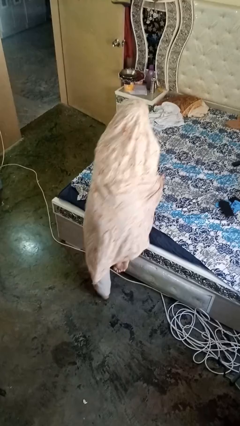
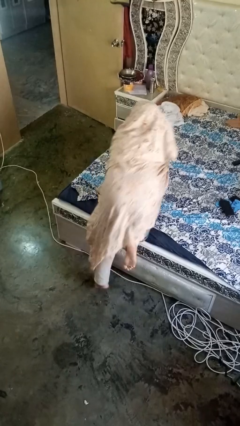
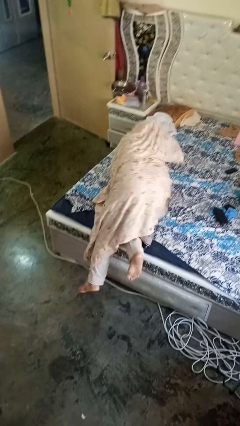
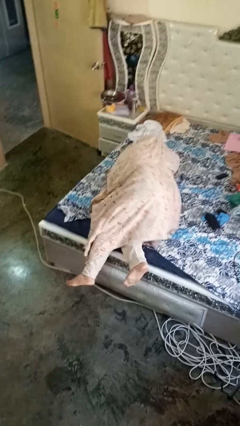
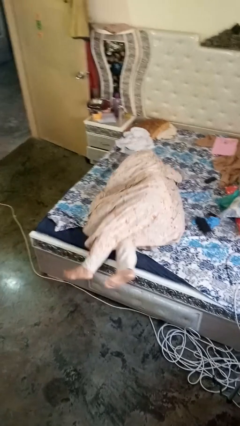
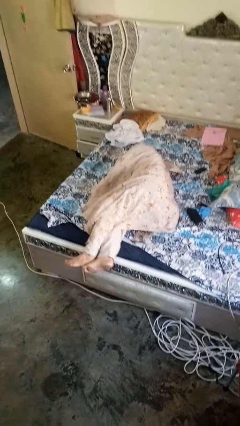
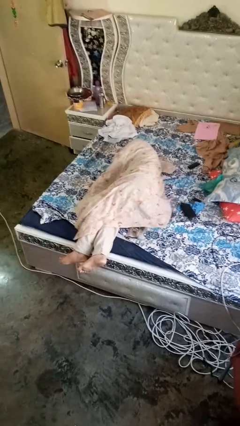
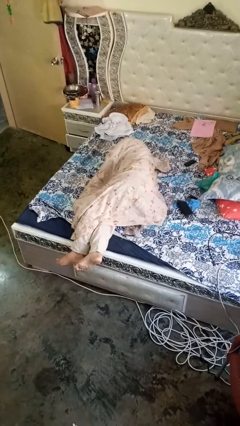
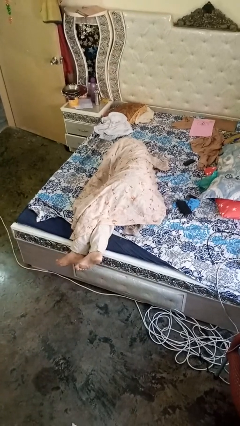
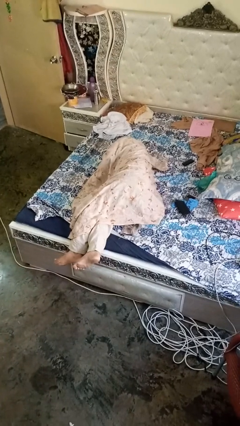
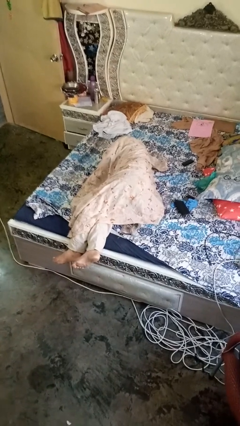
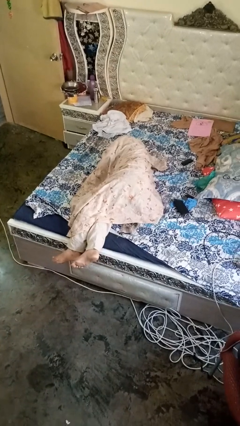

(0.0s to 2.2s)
person lies down on bed

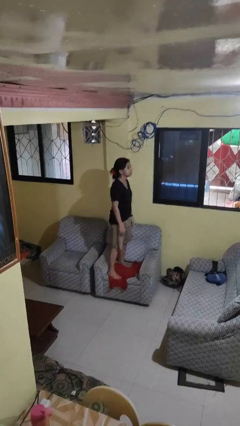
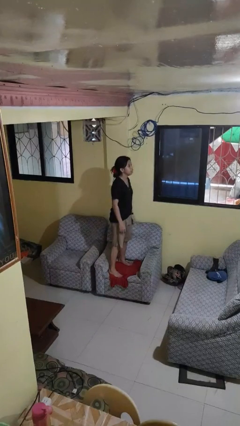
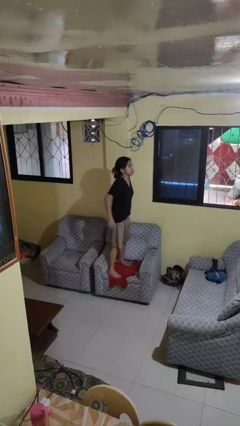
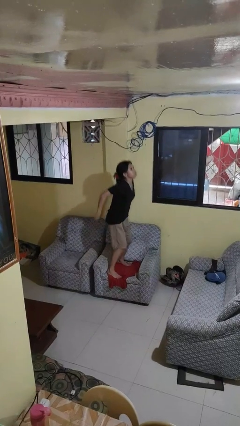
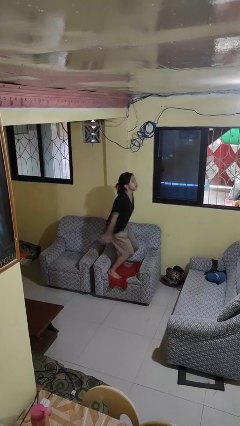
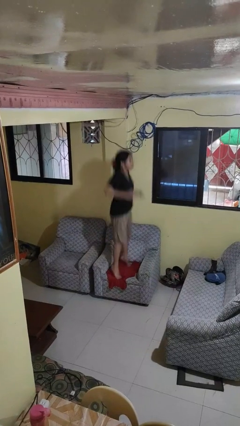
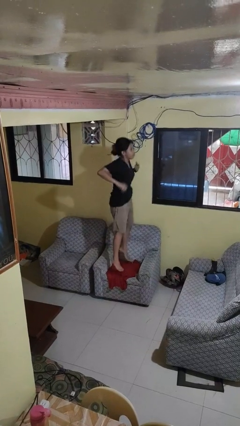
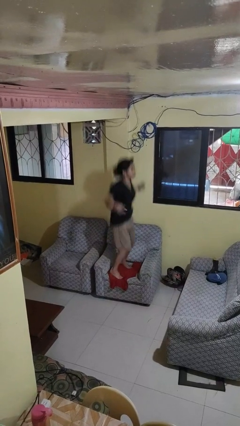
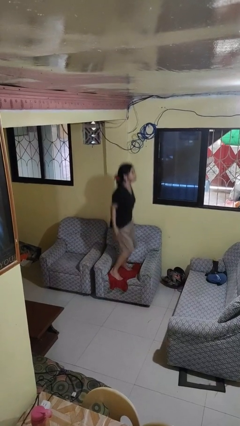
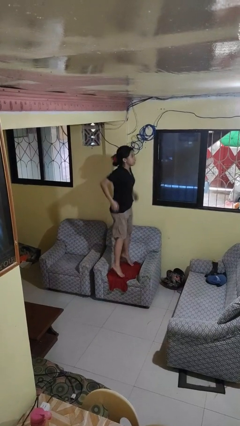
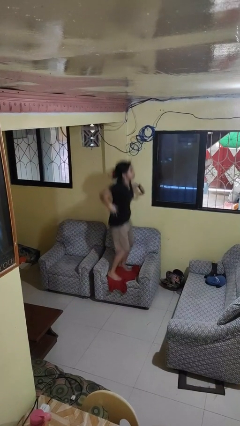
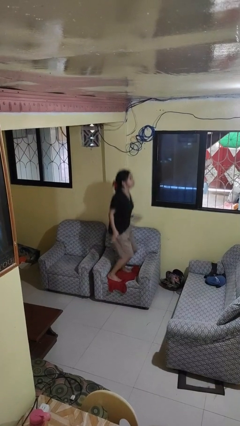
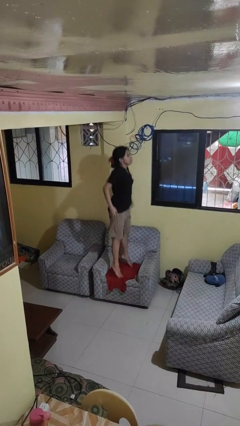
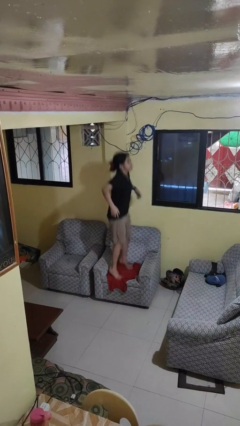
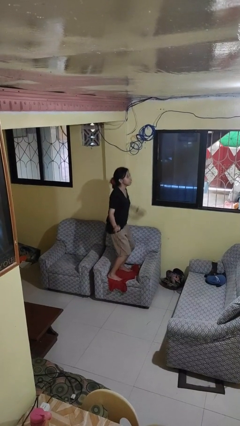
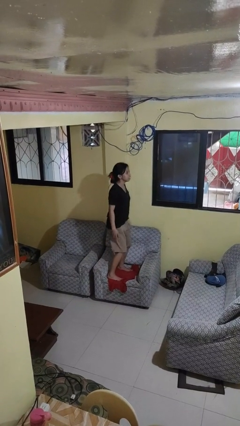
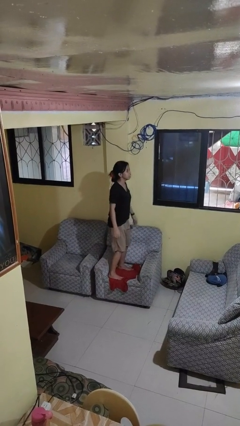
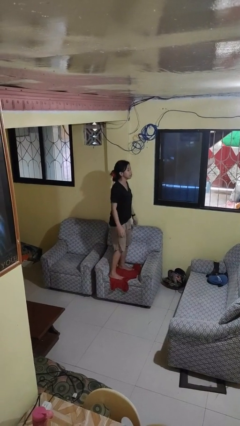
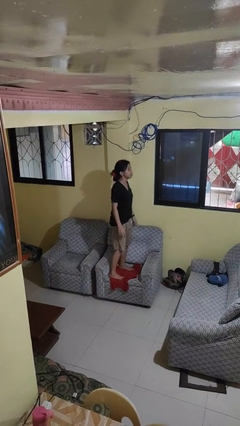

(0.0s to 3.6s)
person jumps on couch

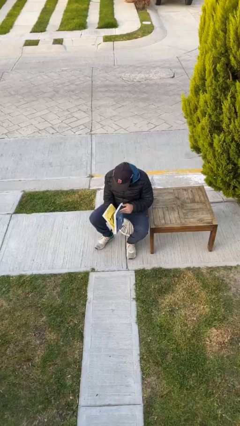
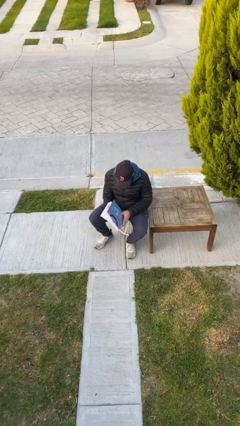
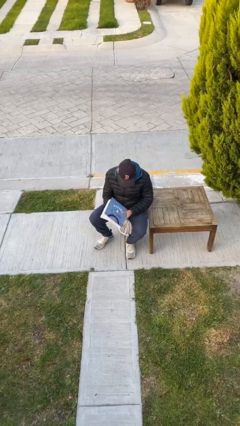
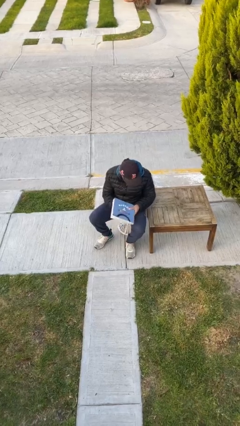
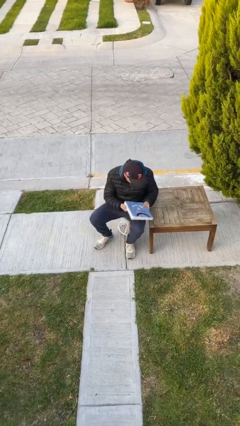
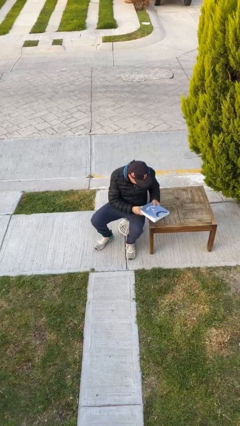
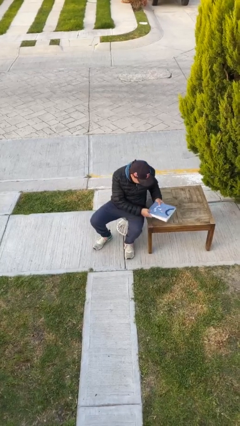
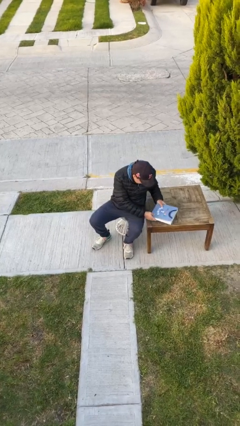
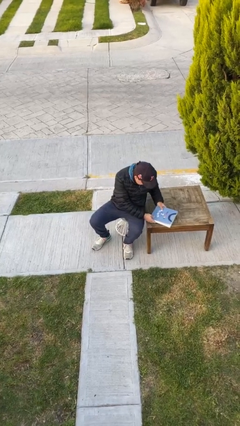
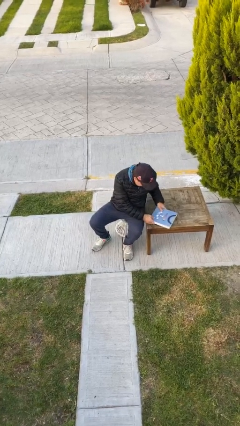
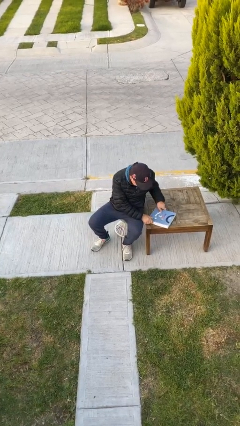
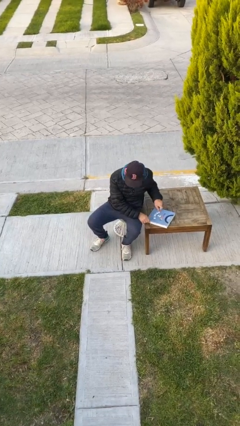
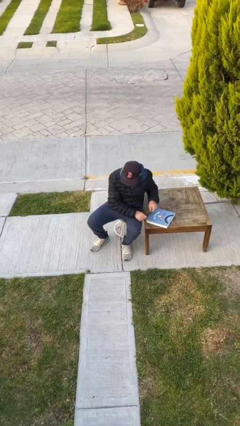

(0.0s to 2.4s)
person puts down object on table

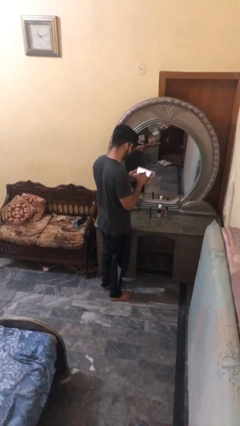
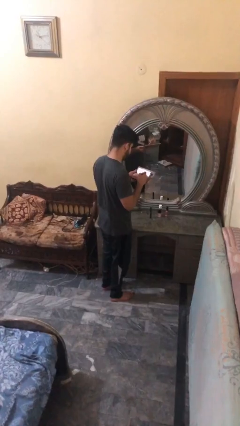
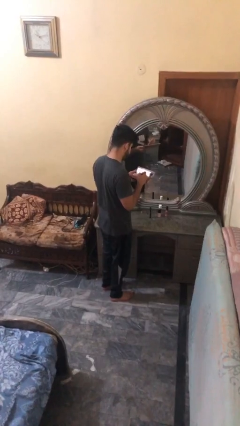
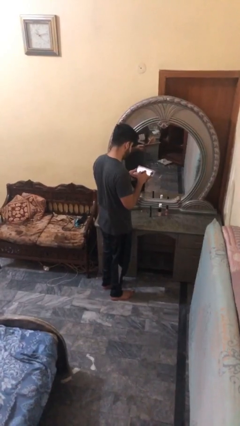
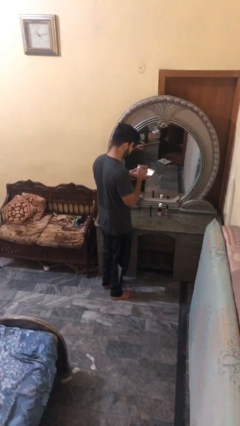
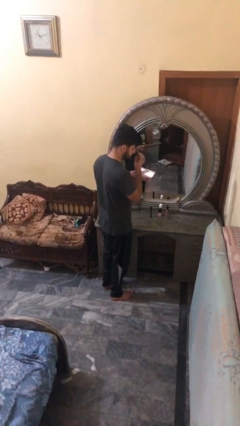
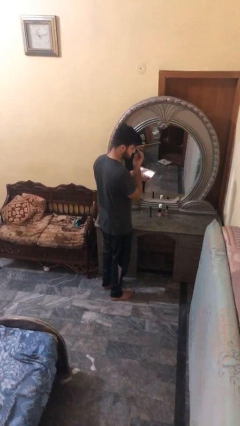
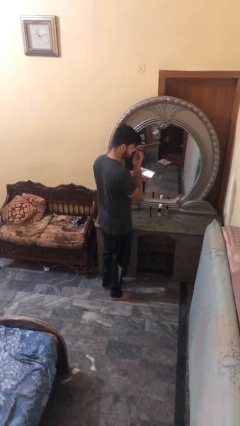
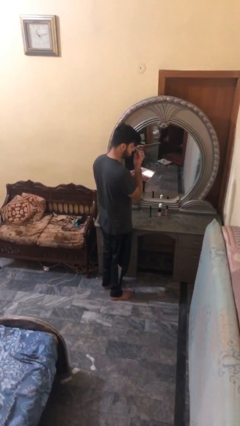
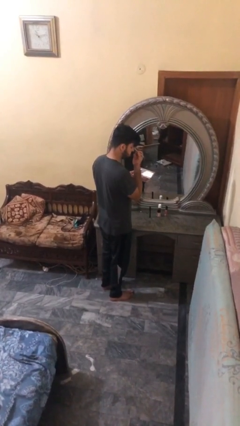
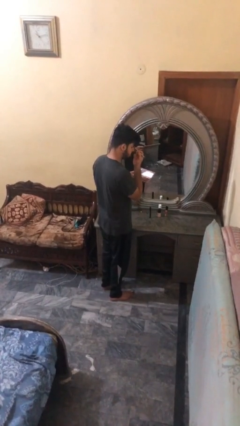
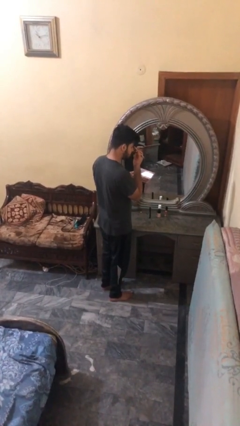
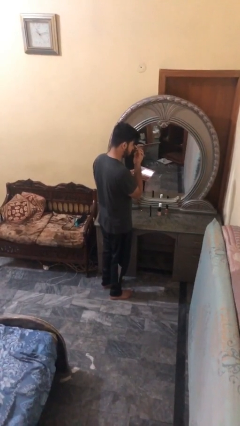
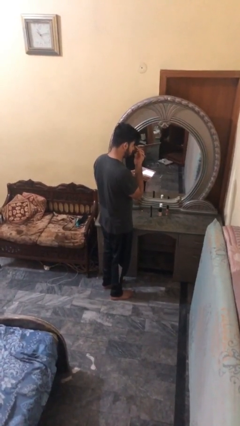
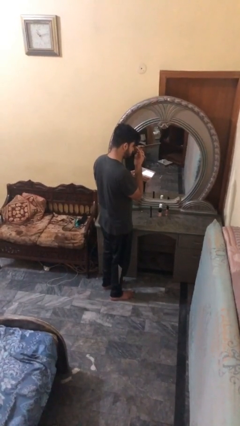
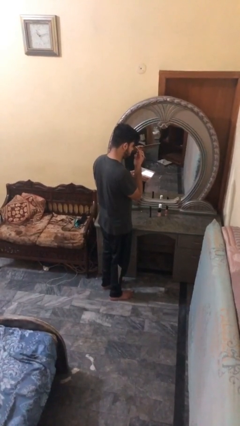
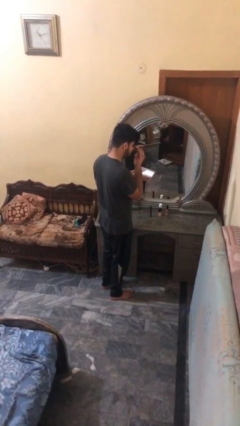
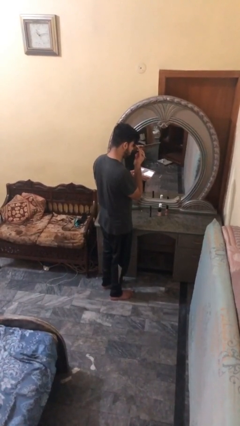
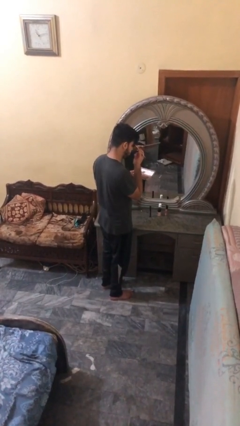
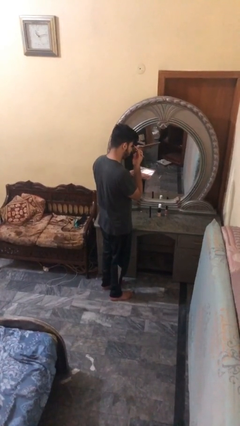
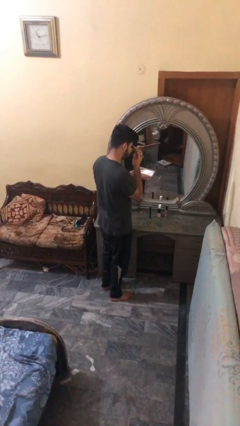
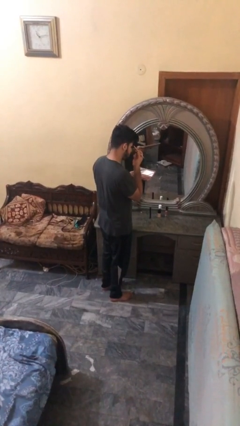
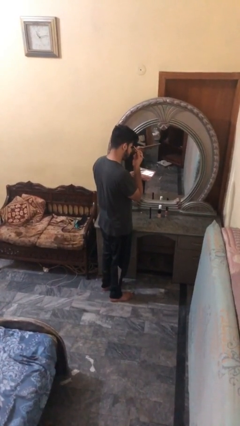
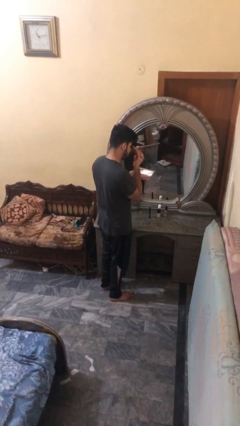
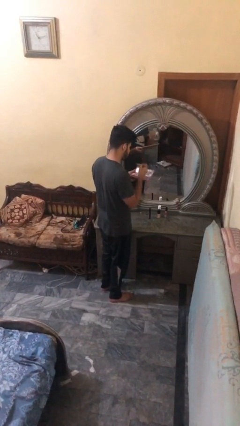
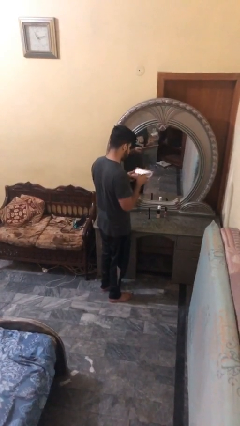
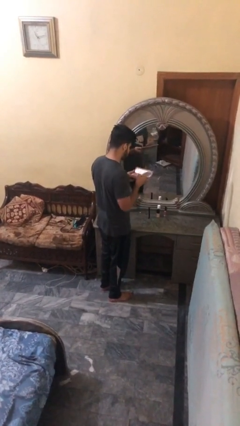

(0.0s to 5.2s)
person applies eye makeup

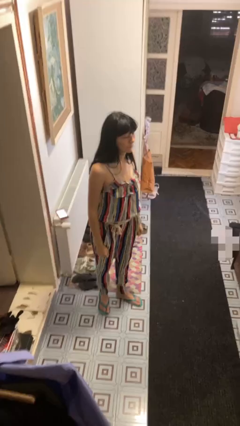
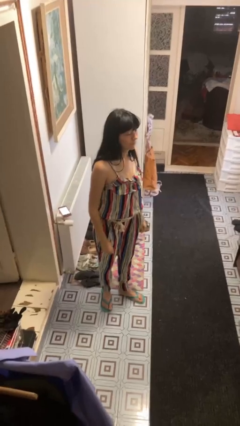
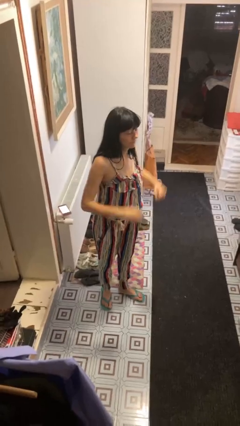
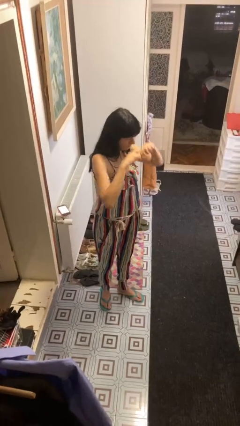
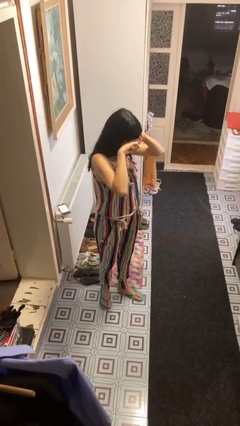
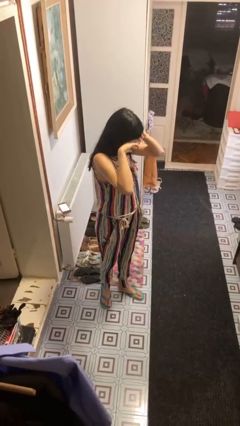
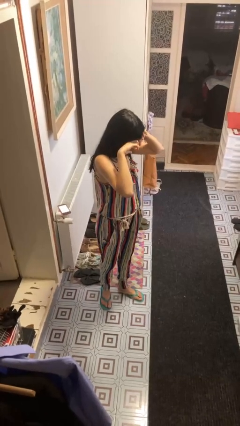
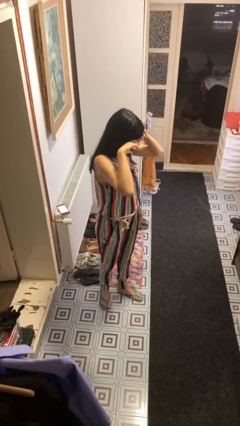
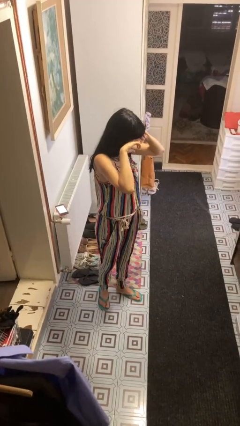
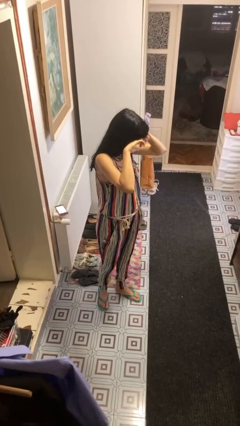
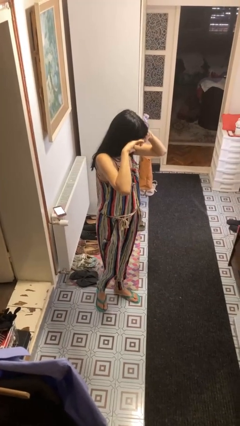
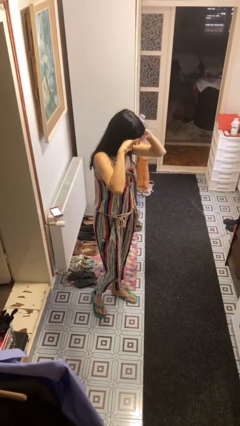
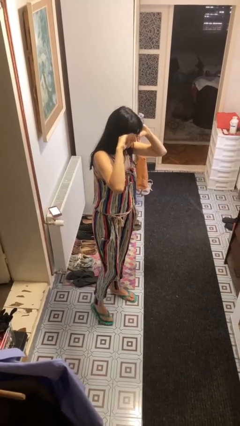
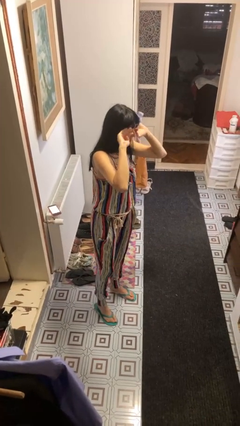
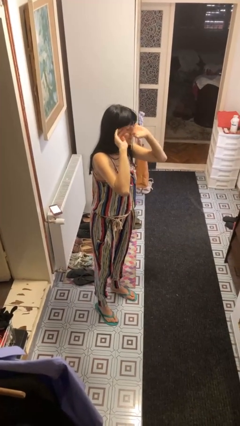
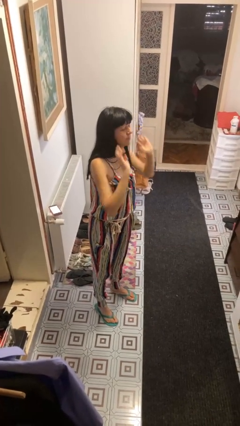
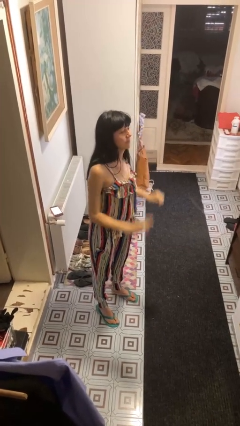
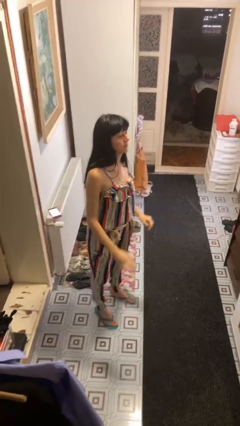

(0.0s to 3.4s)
person rubs eyes

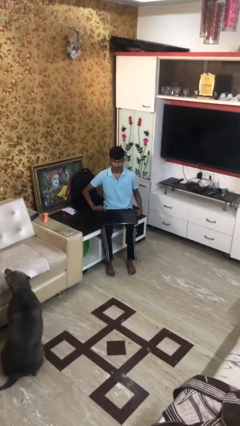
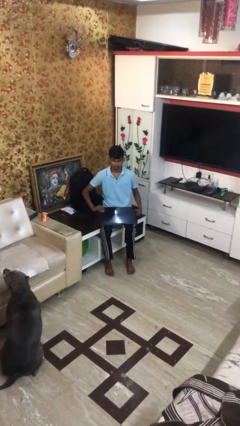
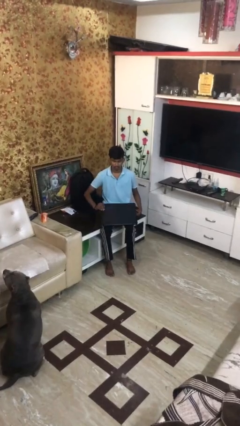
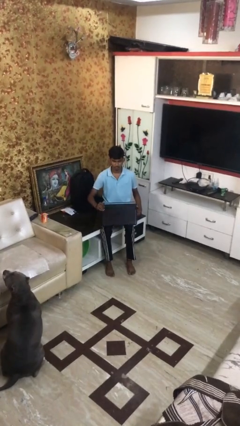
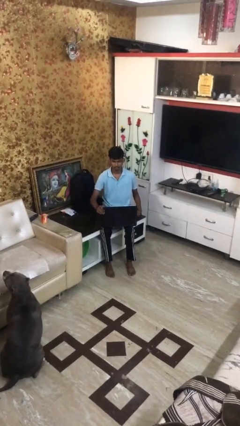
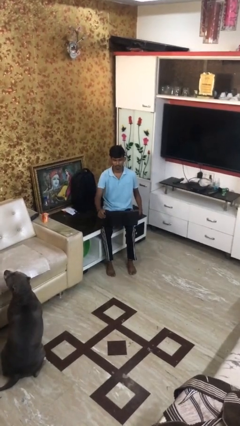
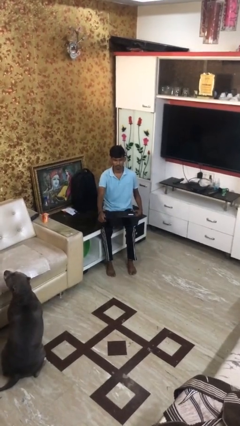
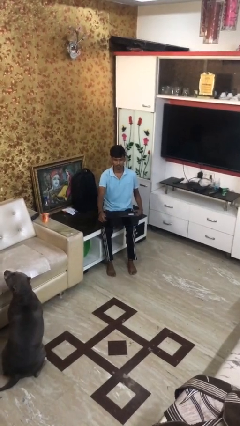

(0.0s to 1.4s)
person opens laptop
